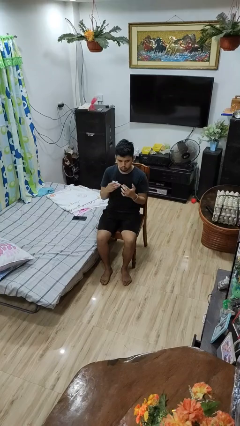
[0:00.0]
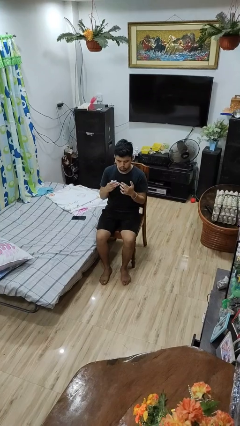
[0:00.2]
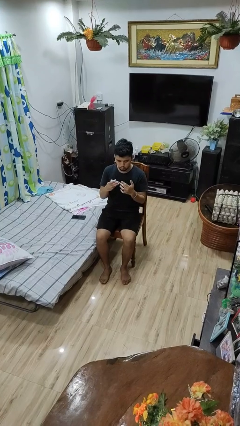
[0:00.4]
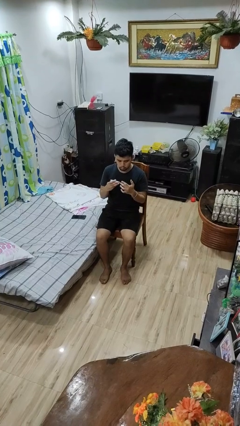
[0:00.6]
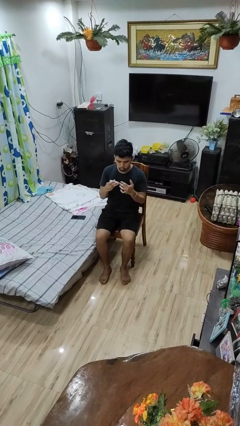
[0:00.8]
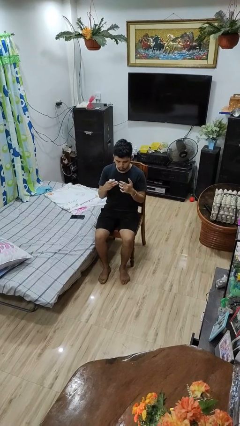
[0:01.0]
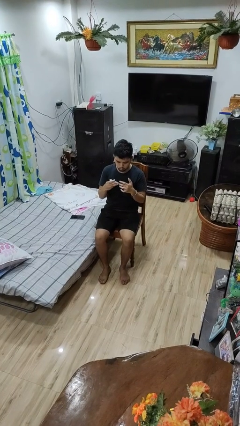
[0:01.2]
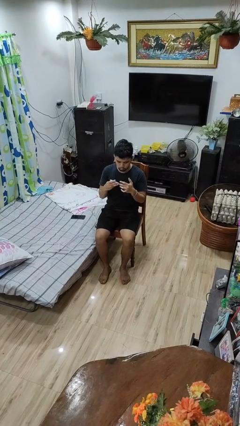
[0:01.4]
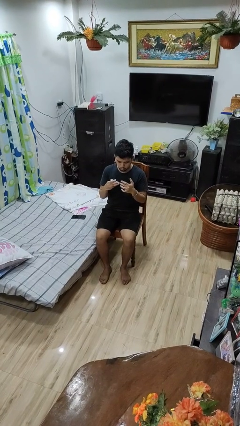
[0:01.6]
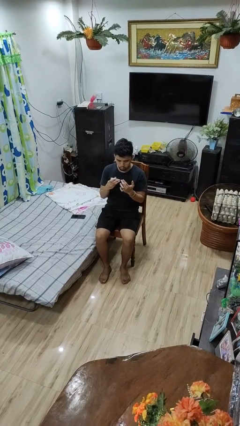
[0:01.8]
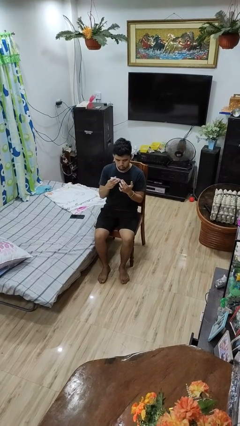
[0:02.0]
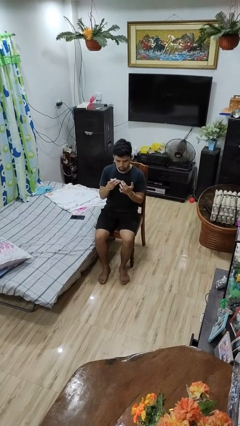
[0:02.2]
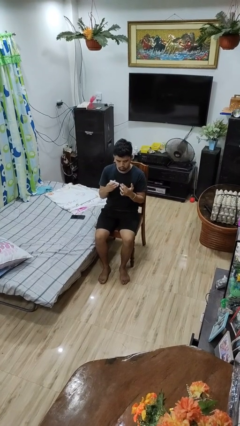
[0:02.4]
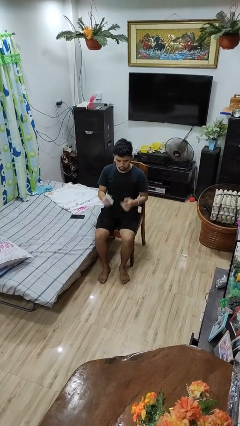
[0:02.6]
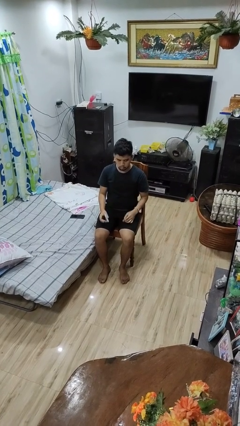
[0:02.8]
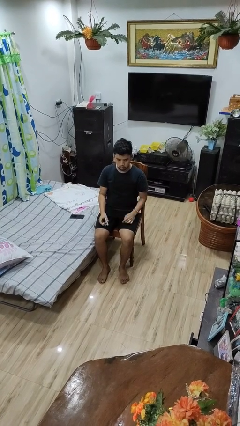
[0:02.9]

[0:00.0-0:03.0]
person clips fingernails

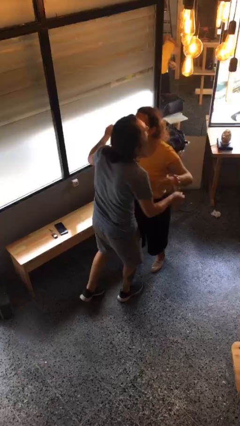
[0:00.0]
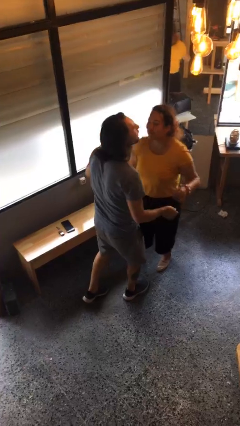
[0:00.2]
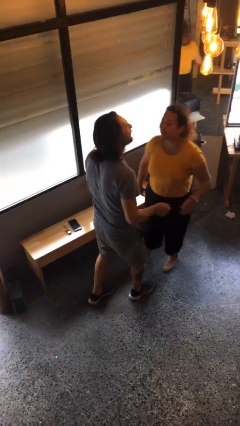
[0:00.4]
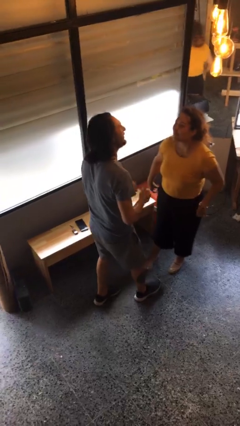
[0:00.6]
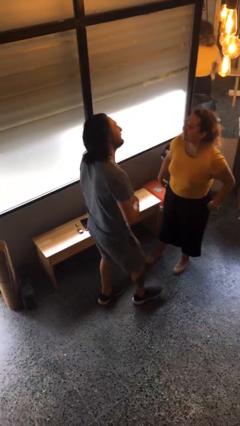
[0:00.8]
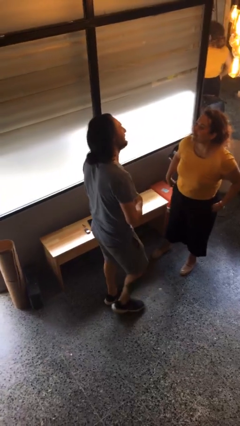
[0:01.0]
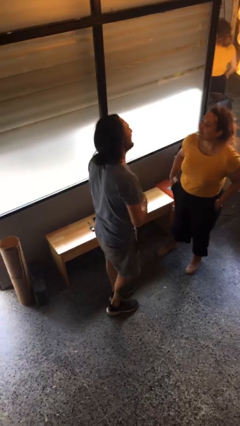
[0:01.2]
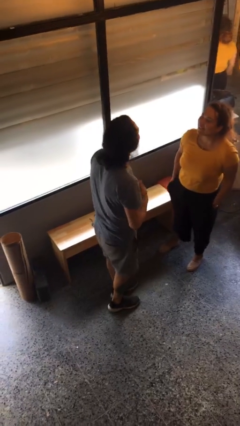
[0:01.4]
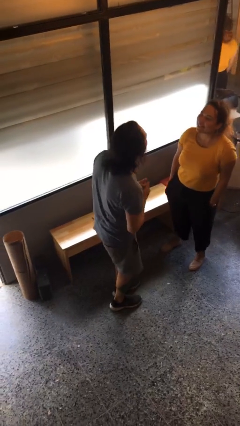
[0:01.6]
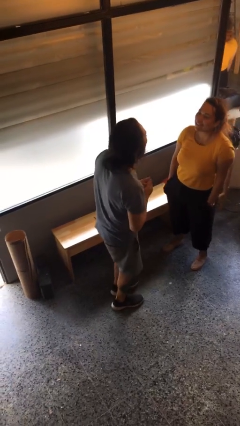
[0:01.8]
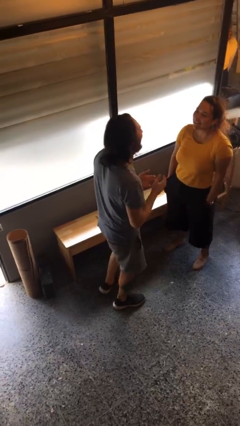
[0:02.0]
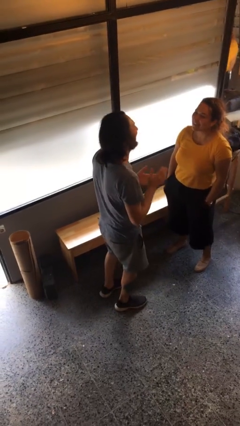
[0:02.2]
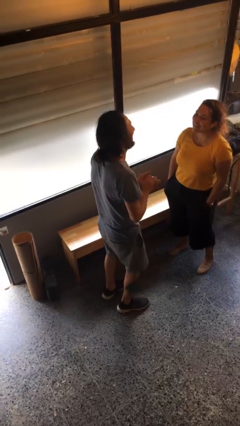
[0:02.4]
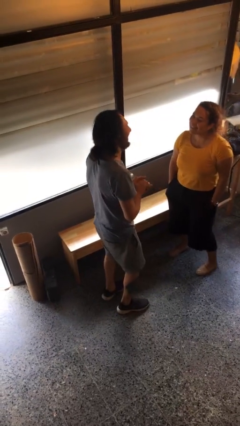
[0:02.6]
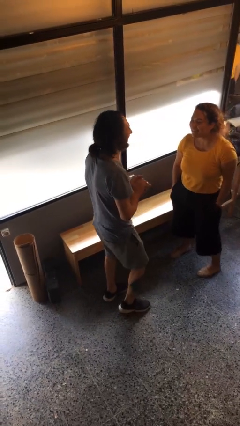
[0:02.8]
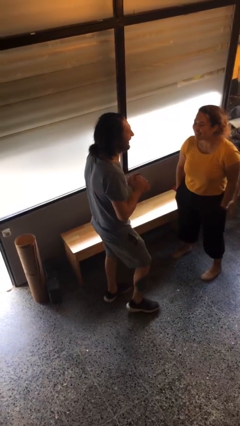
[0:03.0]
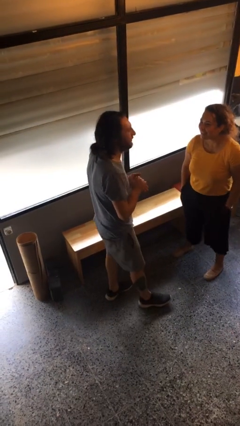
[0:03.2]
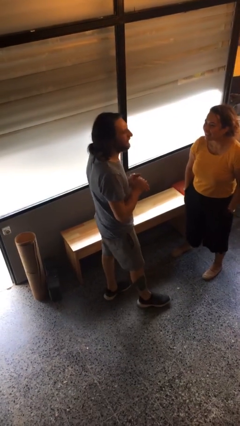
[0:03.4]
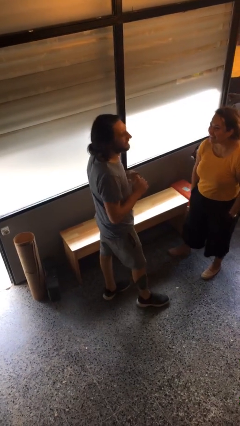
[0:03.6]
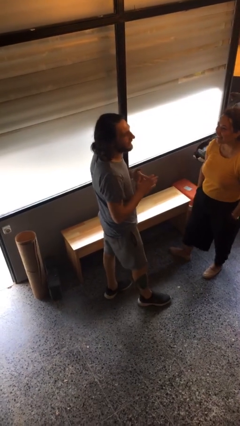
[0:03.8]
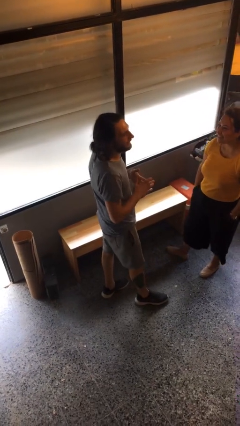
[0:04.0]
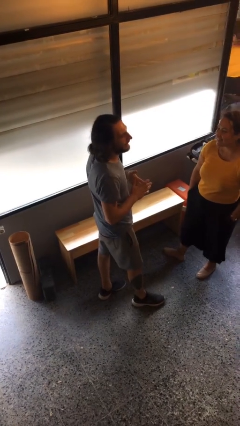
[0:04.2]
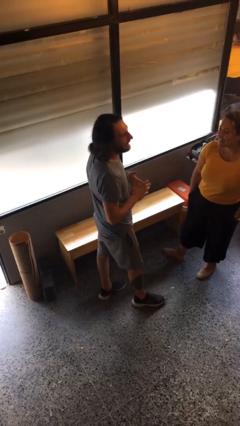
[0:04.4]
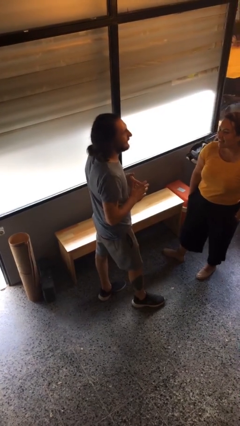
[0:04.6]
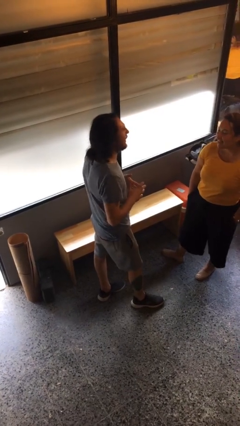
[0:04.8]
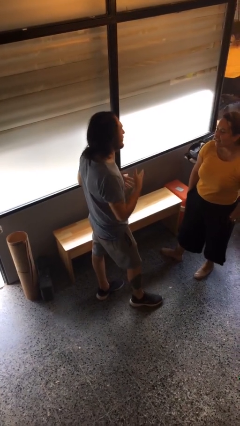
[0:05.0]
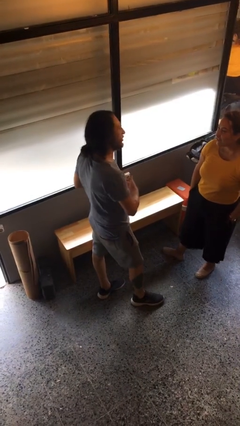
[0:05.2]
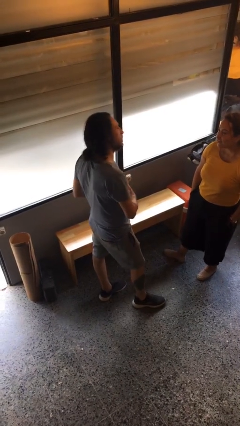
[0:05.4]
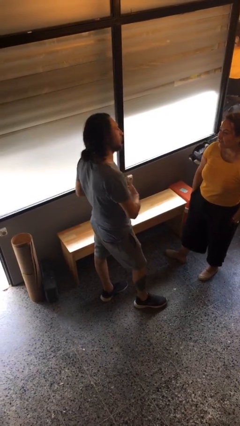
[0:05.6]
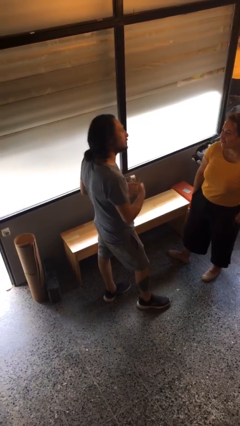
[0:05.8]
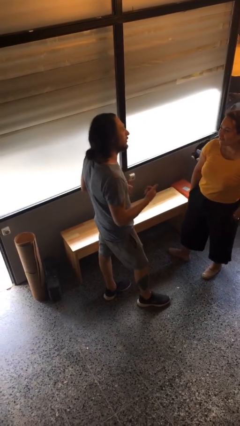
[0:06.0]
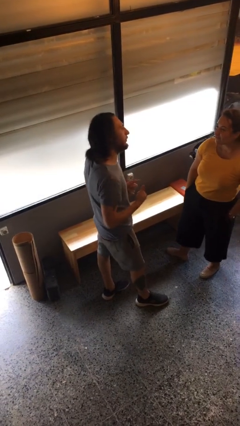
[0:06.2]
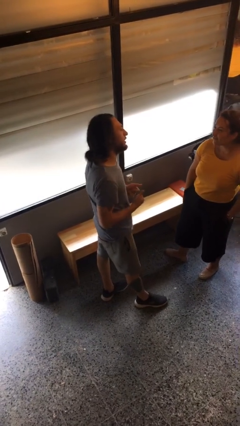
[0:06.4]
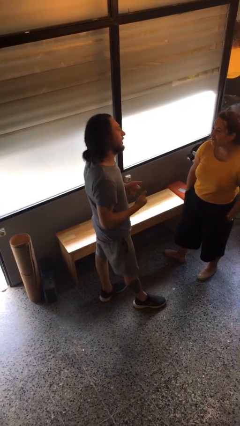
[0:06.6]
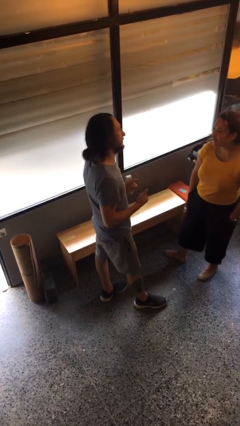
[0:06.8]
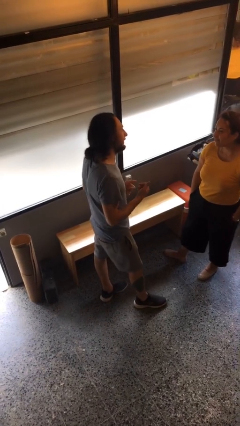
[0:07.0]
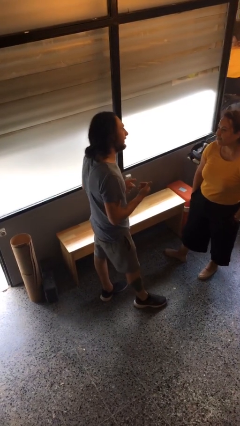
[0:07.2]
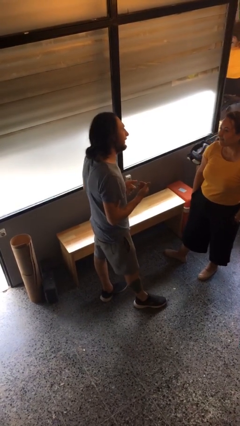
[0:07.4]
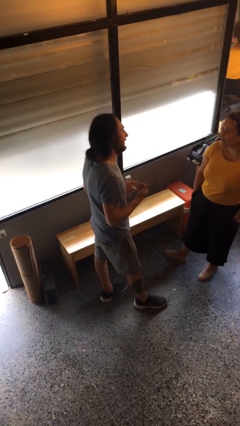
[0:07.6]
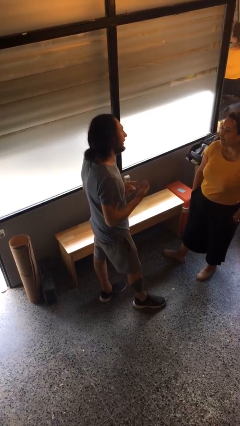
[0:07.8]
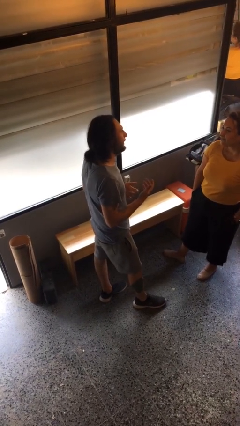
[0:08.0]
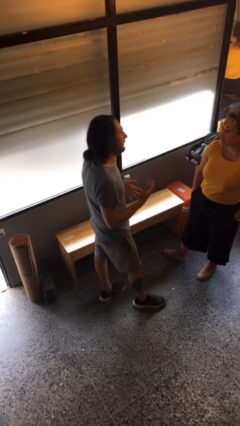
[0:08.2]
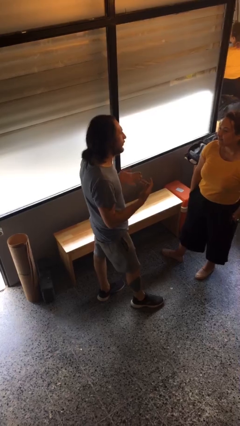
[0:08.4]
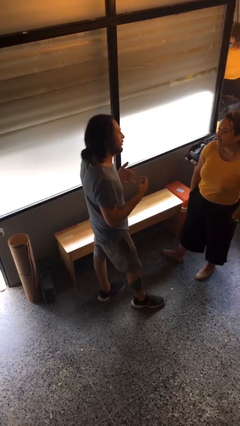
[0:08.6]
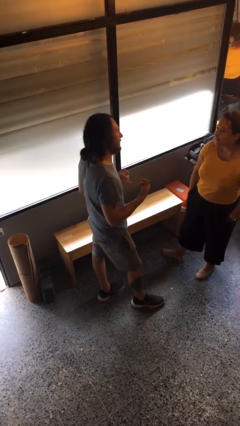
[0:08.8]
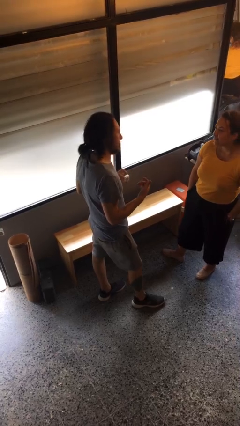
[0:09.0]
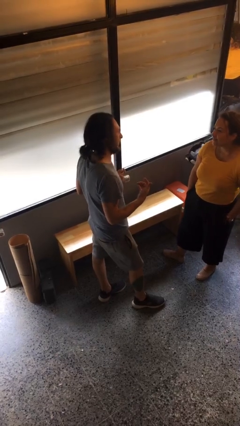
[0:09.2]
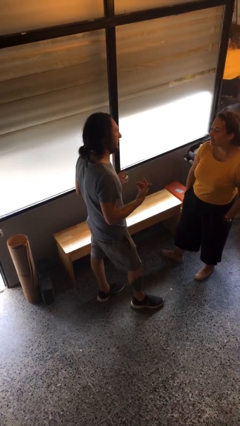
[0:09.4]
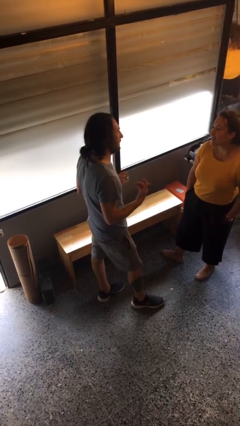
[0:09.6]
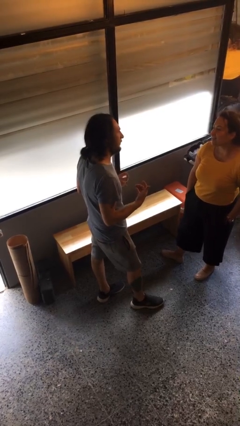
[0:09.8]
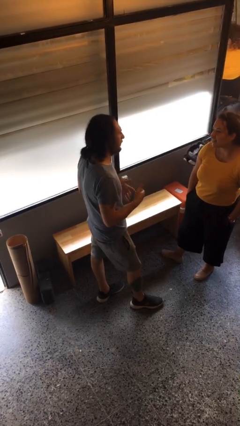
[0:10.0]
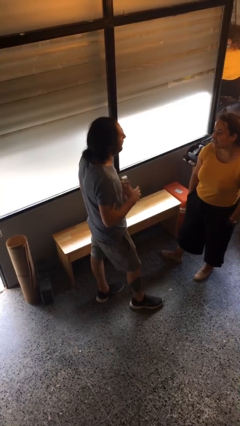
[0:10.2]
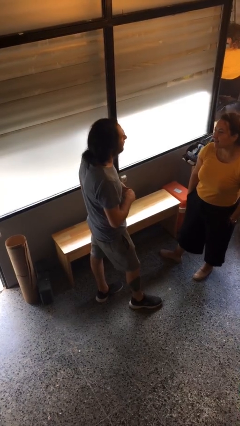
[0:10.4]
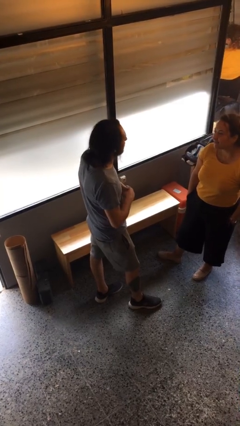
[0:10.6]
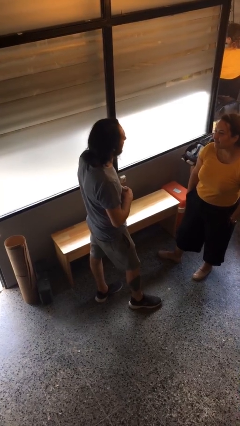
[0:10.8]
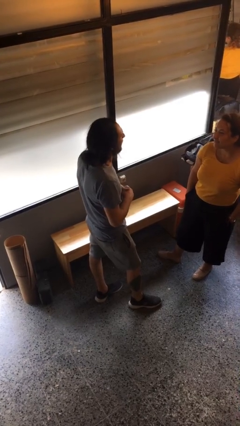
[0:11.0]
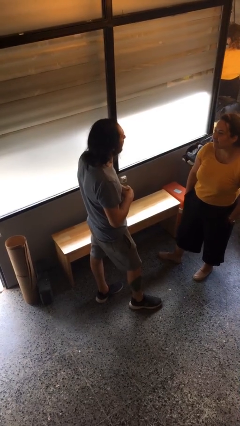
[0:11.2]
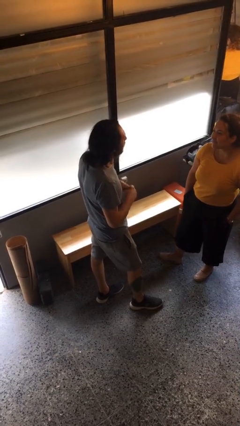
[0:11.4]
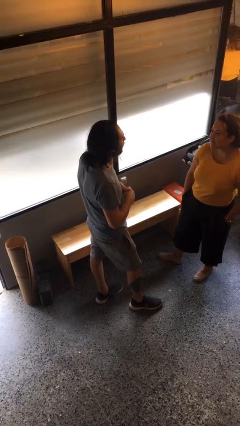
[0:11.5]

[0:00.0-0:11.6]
person talks to person

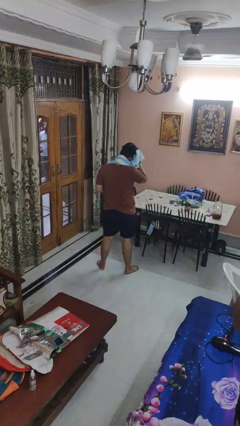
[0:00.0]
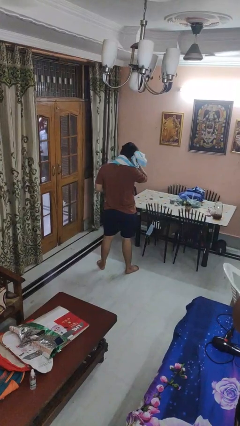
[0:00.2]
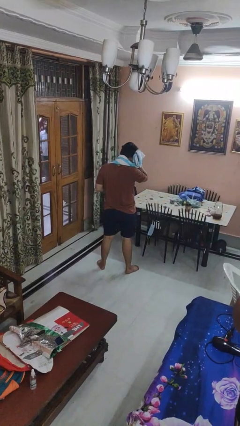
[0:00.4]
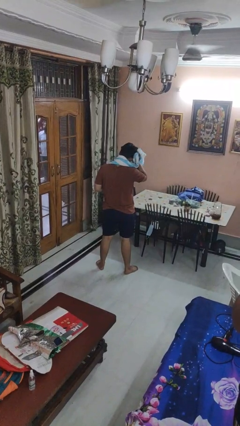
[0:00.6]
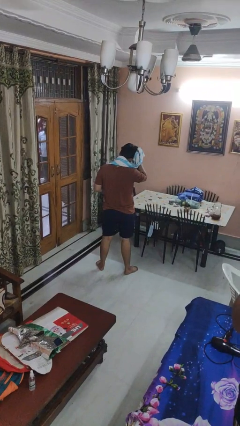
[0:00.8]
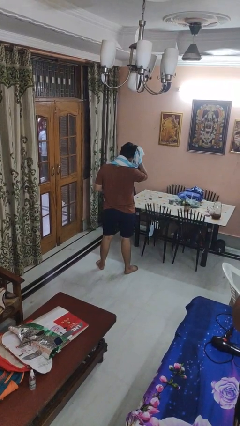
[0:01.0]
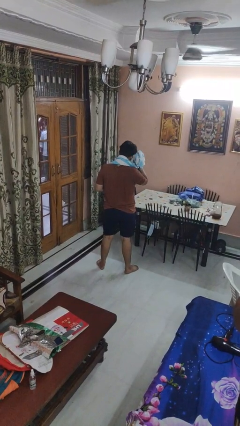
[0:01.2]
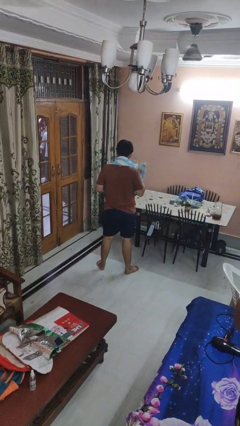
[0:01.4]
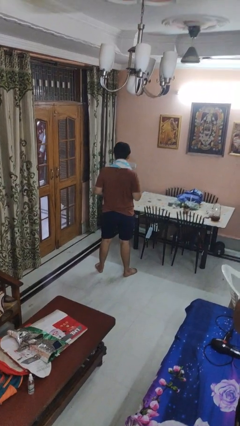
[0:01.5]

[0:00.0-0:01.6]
person dries hair with towel

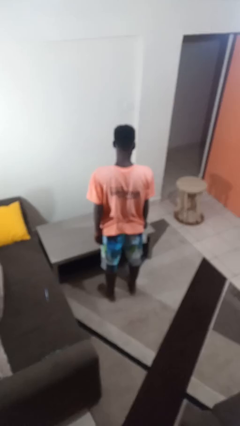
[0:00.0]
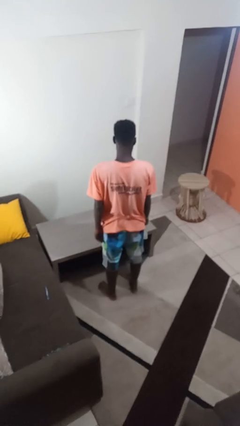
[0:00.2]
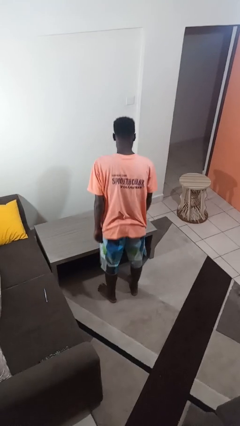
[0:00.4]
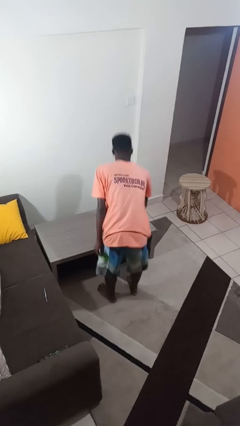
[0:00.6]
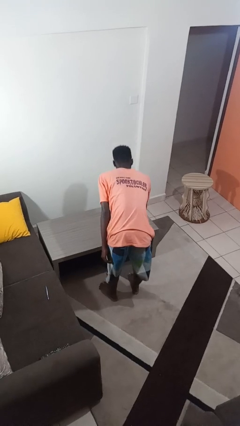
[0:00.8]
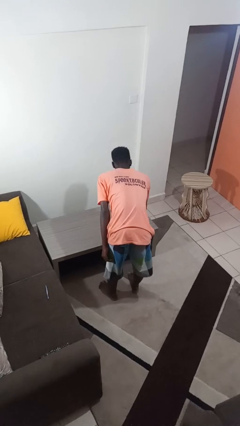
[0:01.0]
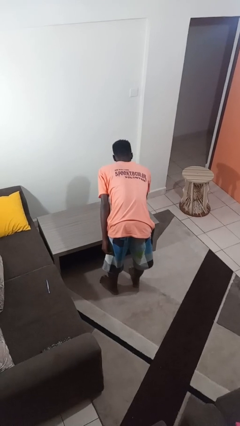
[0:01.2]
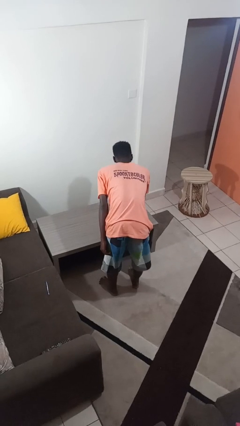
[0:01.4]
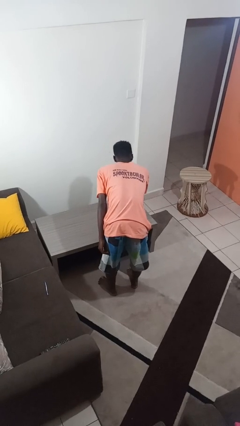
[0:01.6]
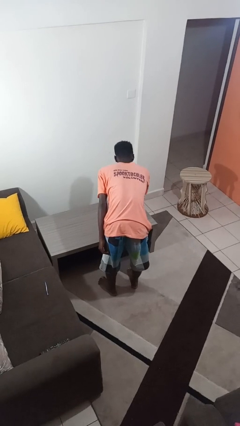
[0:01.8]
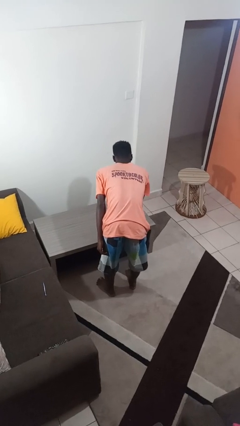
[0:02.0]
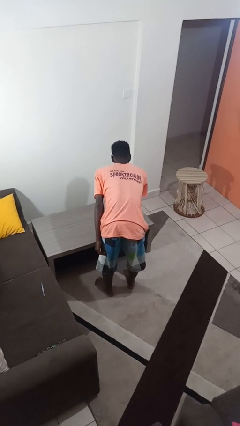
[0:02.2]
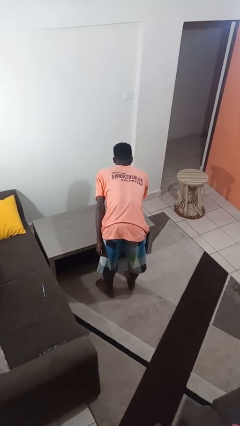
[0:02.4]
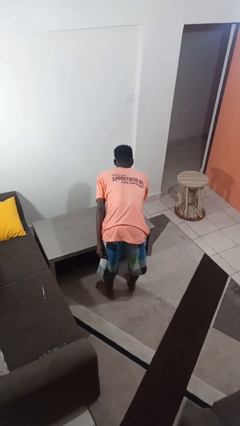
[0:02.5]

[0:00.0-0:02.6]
person sprays from bottle
